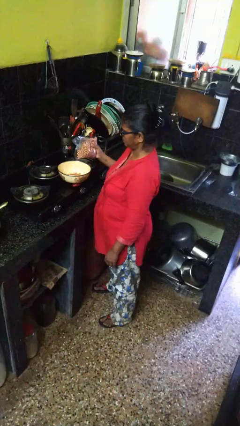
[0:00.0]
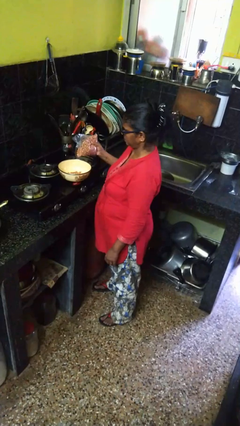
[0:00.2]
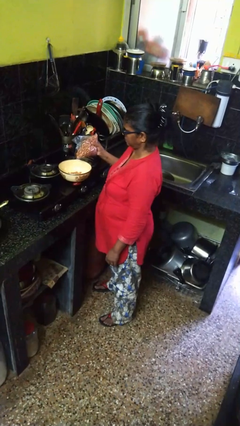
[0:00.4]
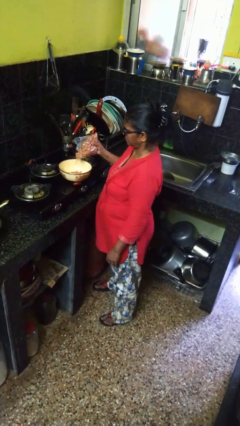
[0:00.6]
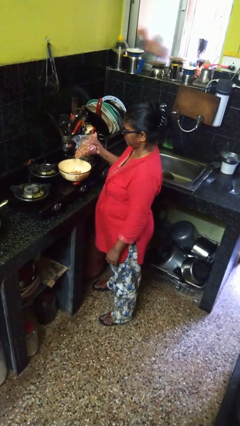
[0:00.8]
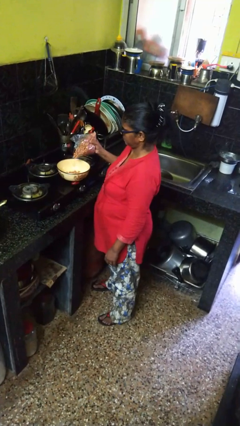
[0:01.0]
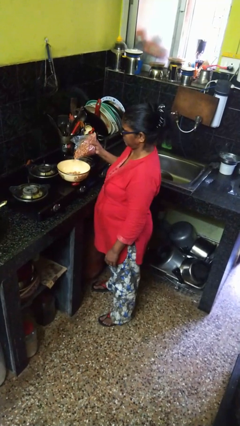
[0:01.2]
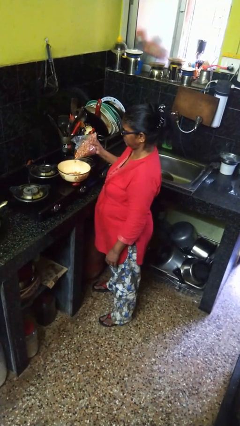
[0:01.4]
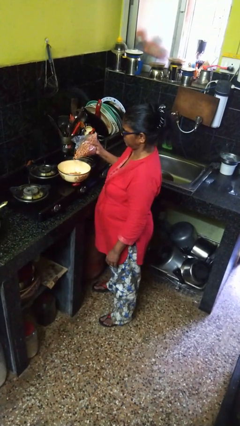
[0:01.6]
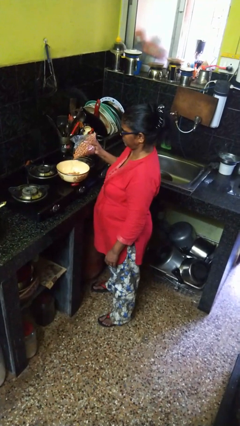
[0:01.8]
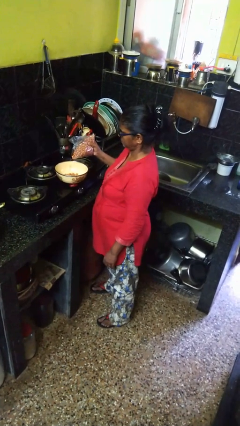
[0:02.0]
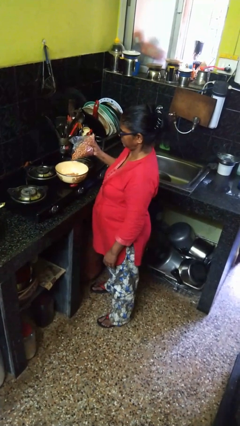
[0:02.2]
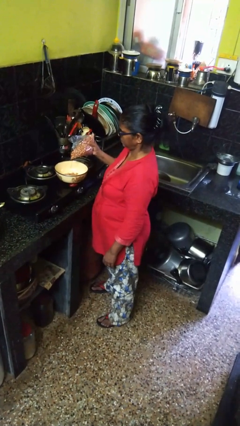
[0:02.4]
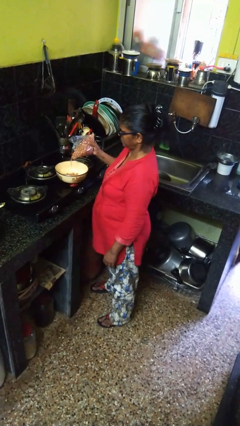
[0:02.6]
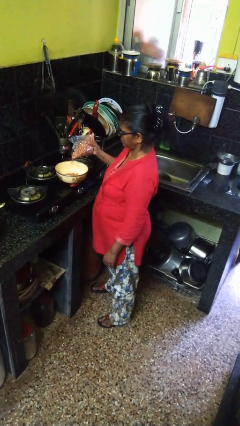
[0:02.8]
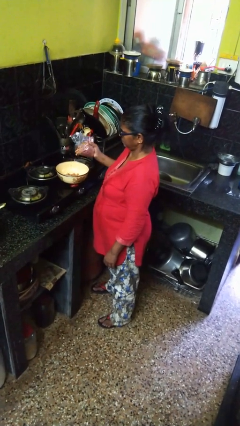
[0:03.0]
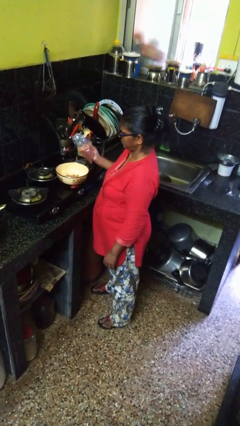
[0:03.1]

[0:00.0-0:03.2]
person pours into bowl

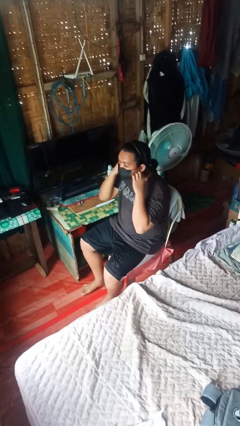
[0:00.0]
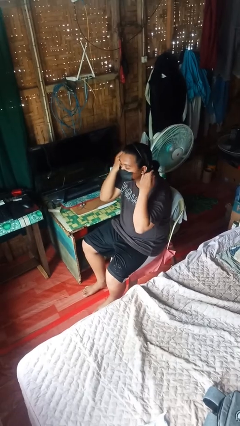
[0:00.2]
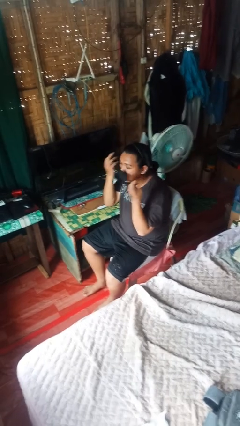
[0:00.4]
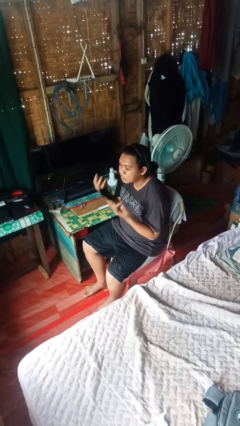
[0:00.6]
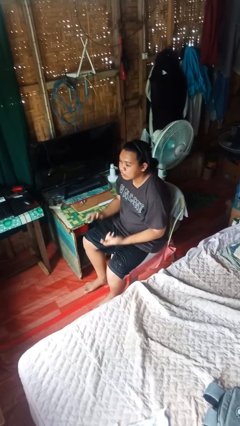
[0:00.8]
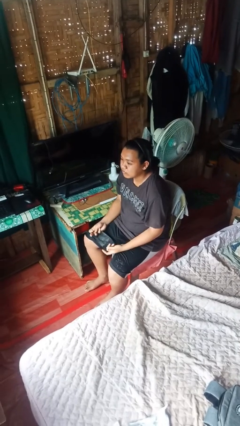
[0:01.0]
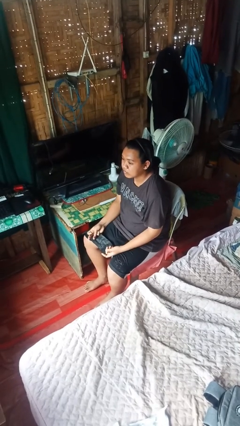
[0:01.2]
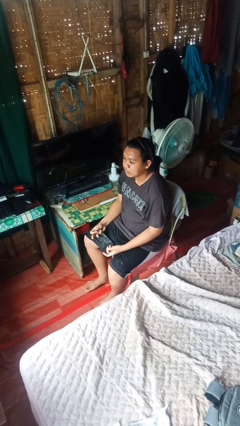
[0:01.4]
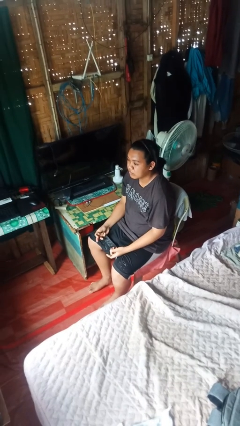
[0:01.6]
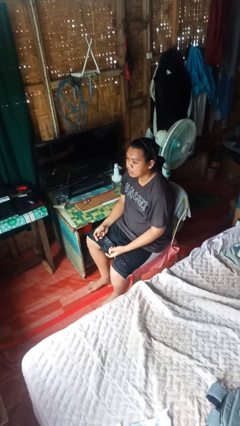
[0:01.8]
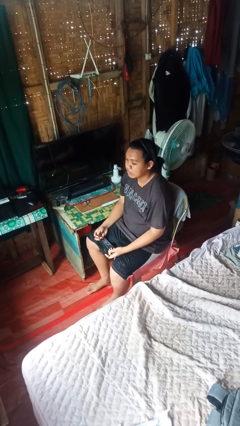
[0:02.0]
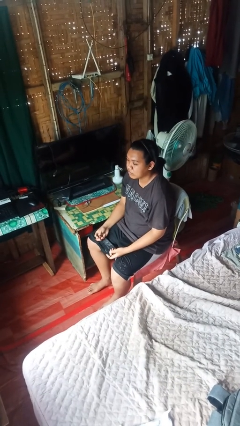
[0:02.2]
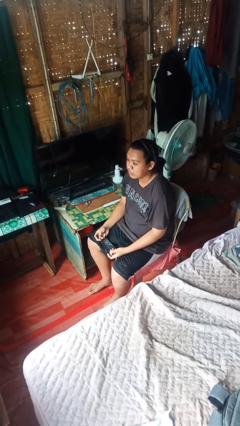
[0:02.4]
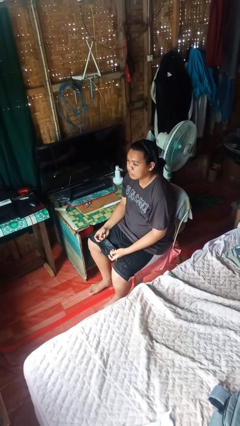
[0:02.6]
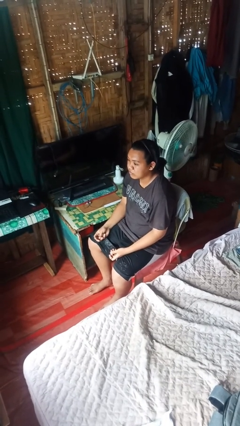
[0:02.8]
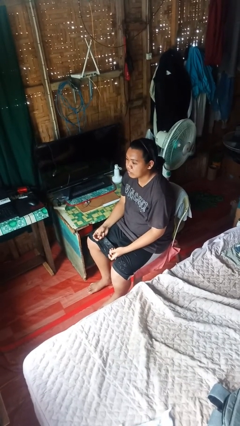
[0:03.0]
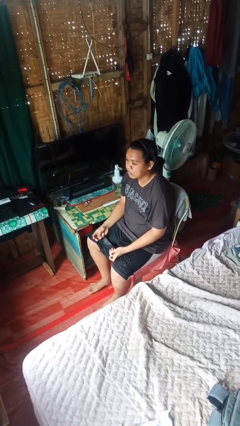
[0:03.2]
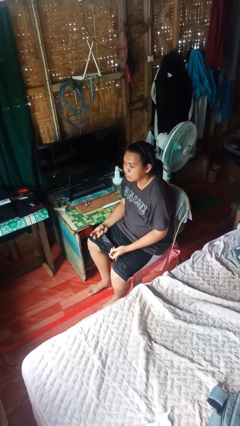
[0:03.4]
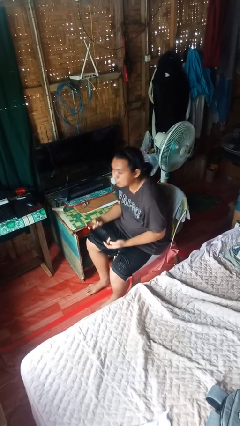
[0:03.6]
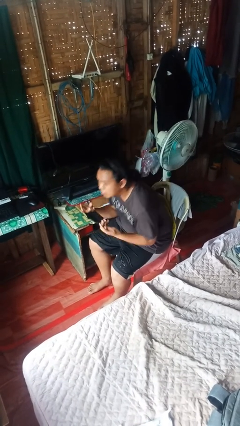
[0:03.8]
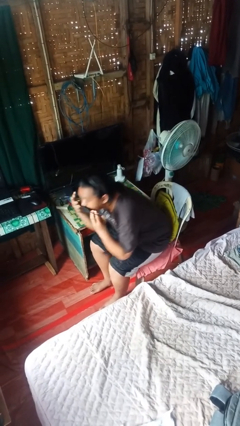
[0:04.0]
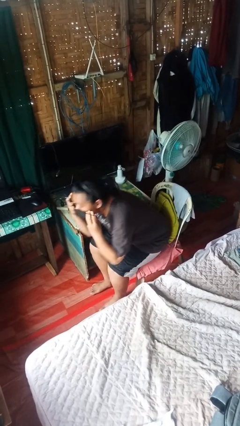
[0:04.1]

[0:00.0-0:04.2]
person takes off facemask

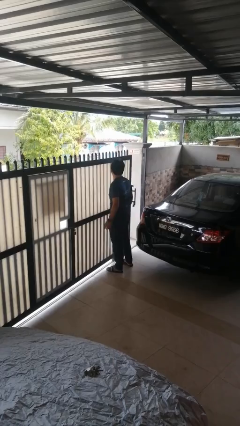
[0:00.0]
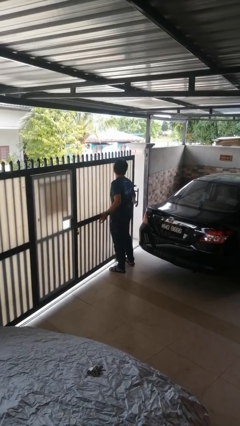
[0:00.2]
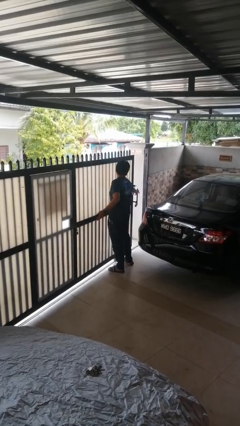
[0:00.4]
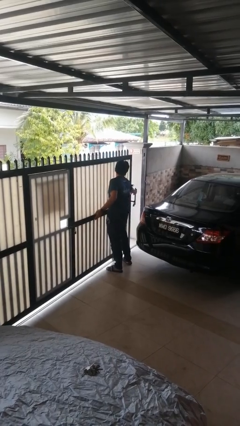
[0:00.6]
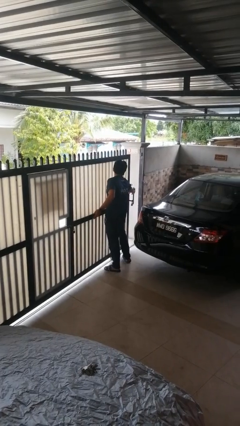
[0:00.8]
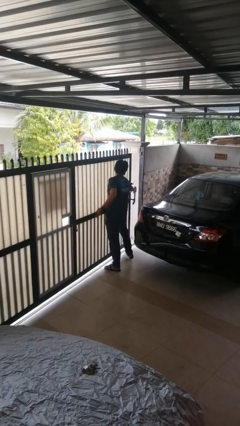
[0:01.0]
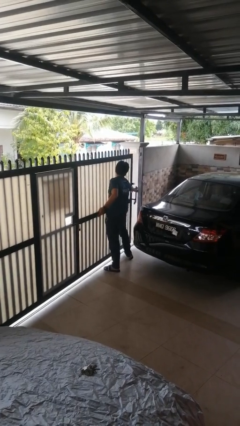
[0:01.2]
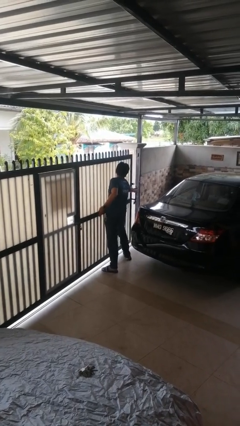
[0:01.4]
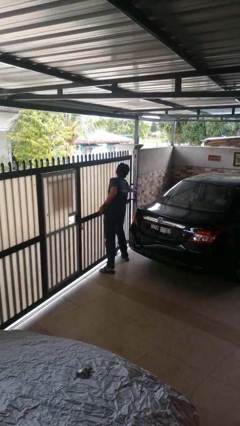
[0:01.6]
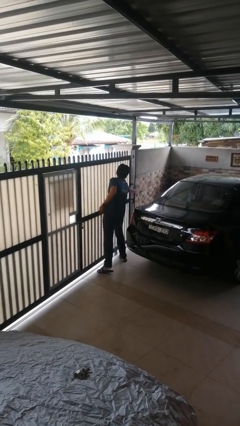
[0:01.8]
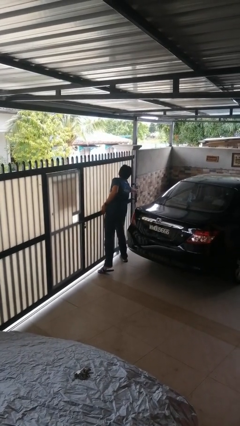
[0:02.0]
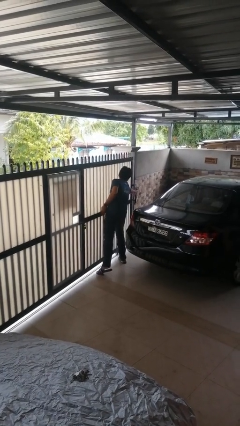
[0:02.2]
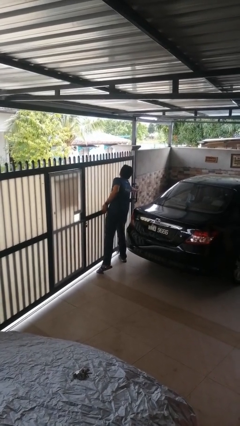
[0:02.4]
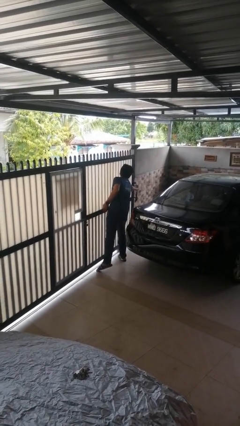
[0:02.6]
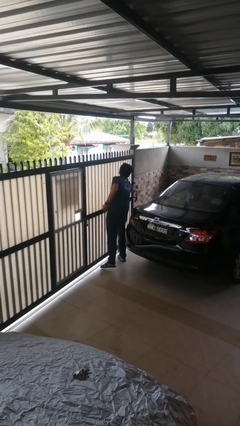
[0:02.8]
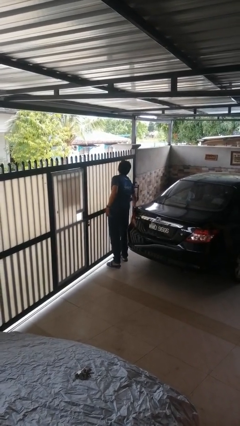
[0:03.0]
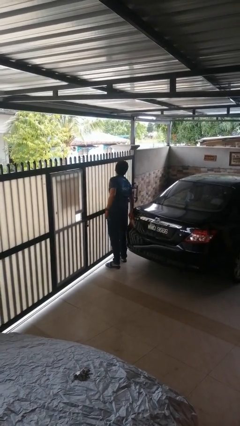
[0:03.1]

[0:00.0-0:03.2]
person closes sliding door

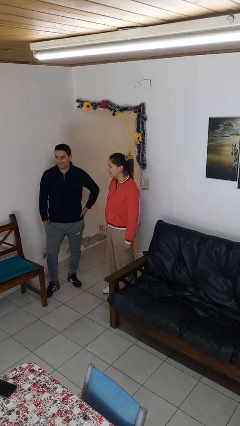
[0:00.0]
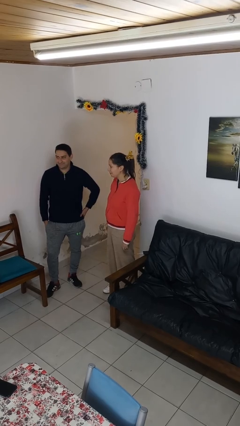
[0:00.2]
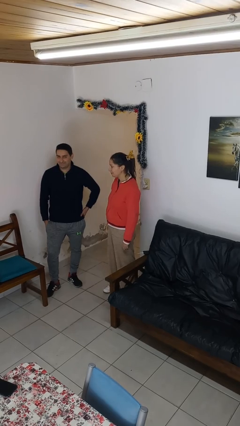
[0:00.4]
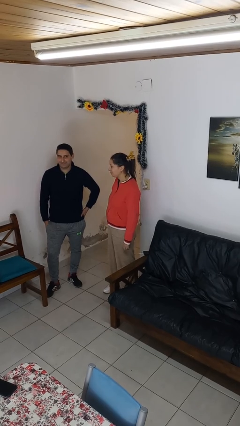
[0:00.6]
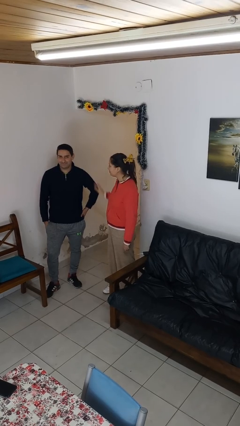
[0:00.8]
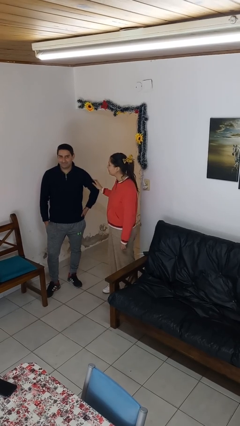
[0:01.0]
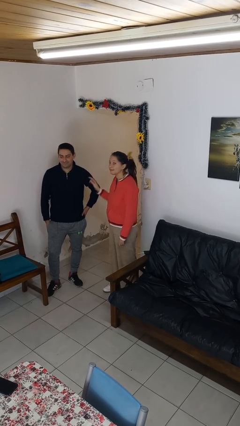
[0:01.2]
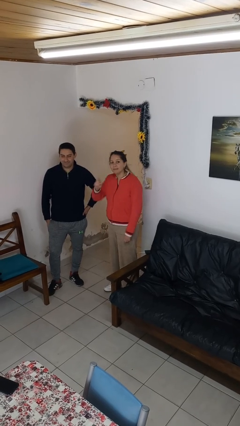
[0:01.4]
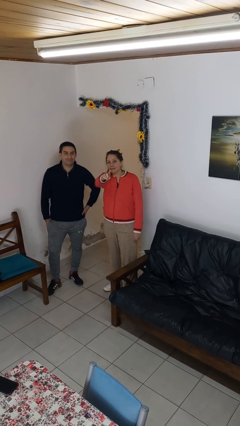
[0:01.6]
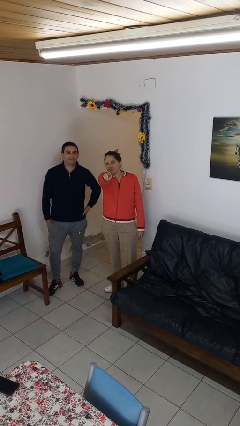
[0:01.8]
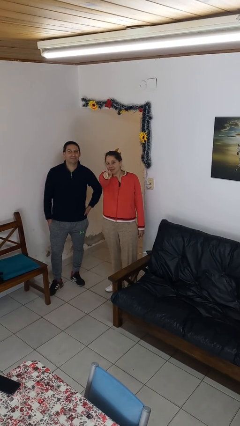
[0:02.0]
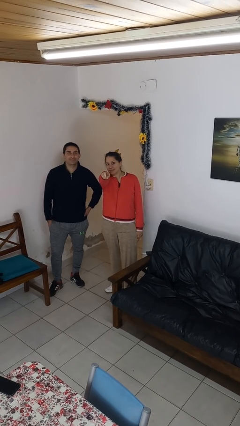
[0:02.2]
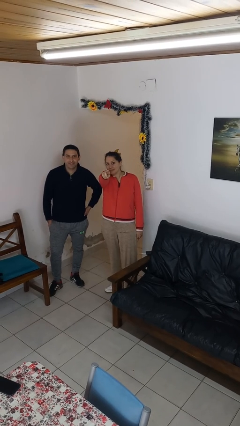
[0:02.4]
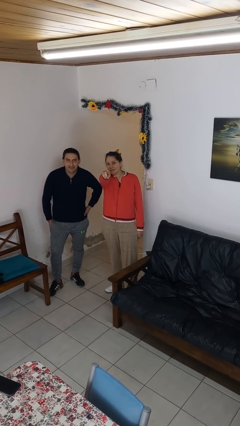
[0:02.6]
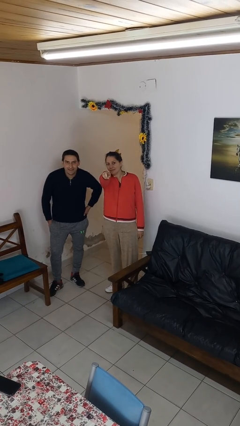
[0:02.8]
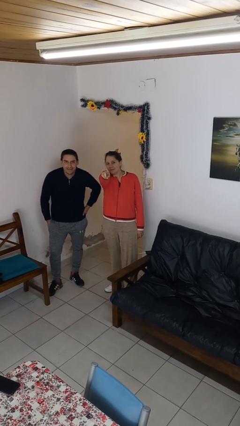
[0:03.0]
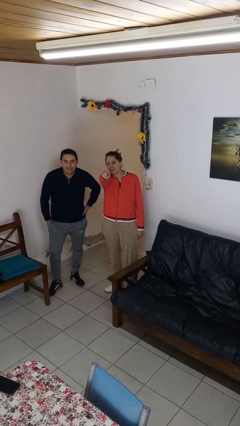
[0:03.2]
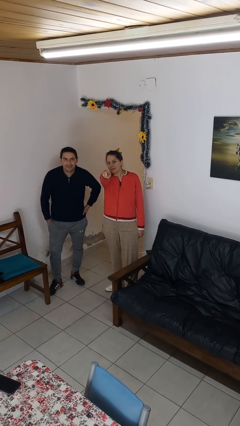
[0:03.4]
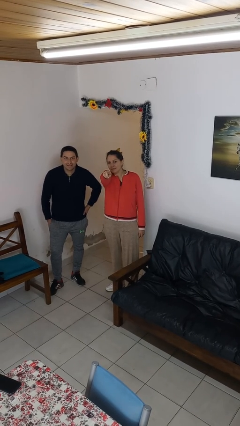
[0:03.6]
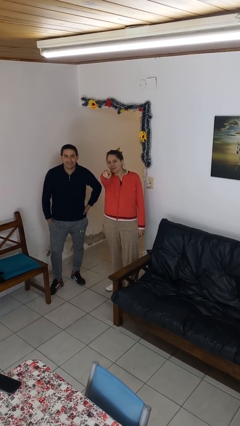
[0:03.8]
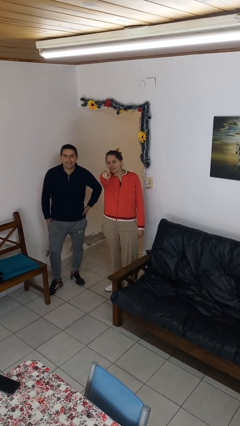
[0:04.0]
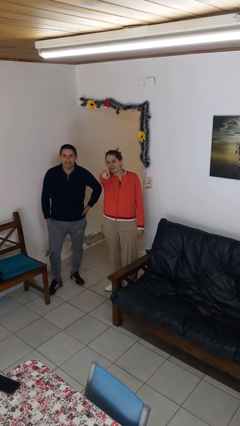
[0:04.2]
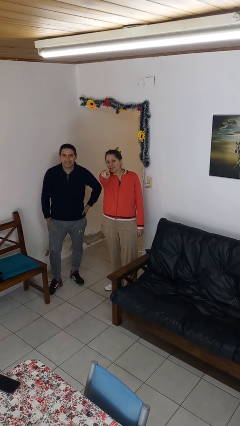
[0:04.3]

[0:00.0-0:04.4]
person points at person

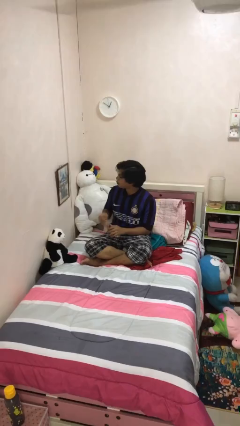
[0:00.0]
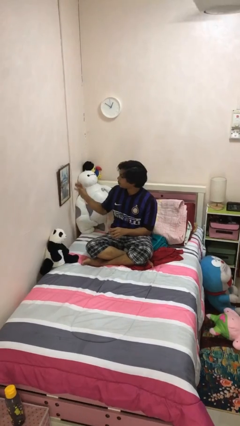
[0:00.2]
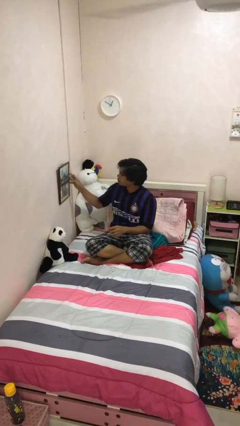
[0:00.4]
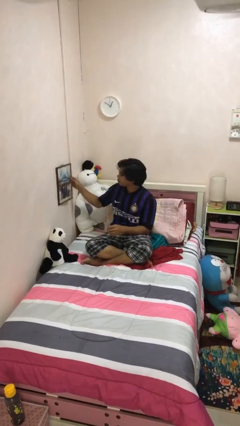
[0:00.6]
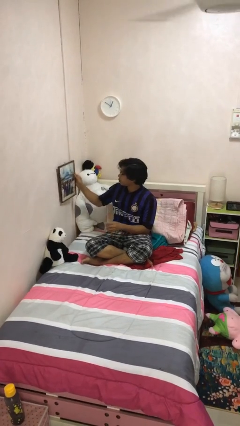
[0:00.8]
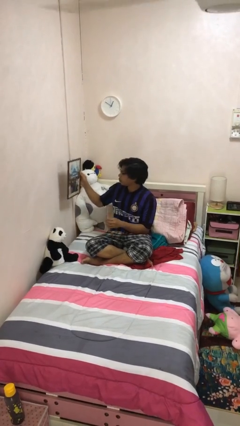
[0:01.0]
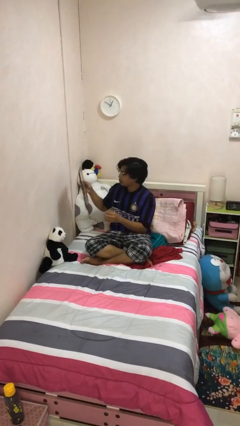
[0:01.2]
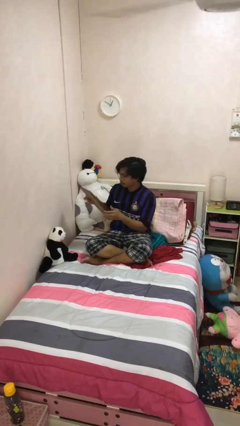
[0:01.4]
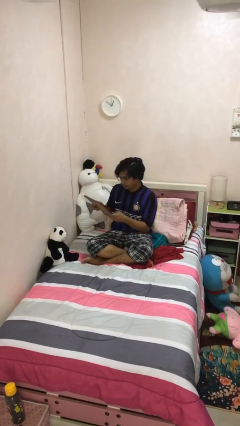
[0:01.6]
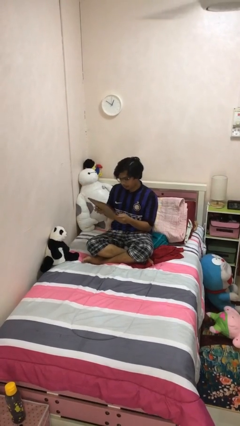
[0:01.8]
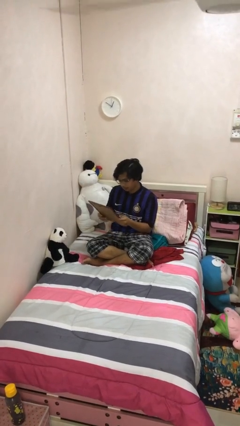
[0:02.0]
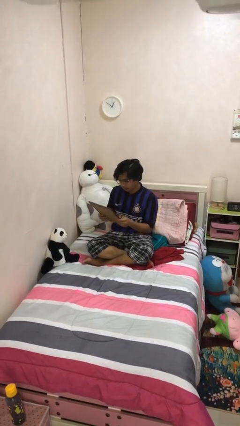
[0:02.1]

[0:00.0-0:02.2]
person takes down picture frame

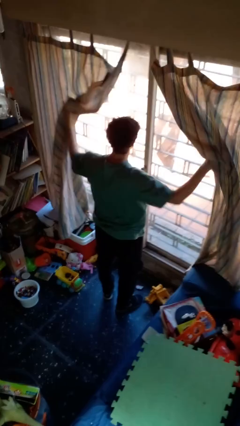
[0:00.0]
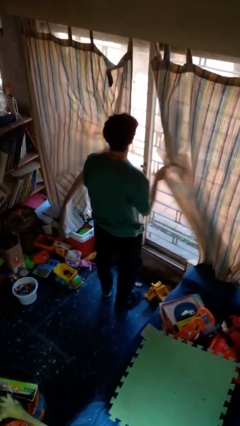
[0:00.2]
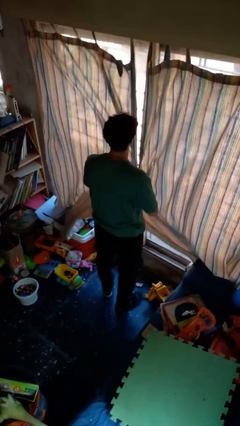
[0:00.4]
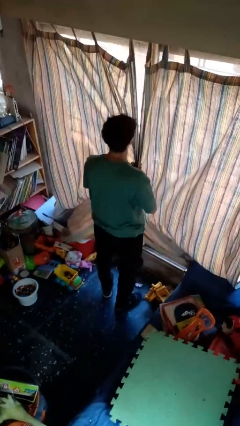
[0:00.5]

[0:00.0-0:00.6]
person closes curtains
